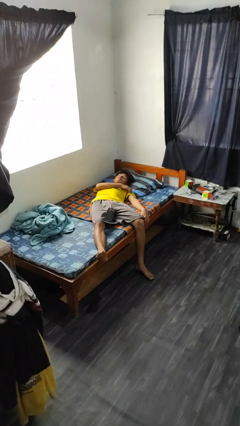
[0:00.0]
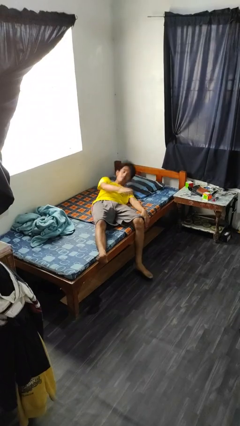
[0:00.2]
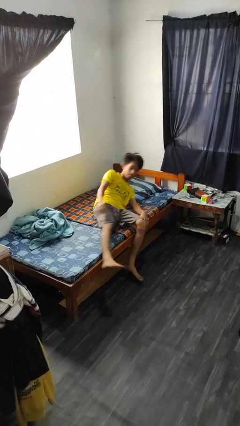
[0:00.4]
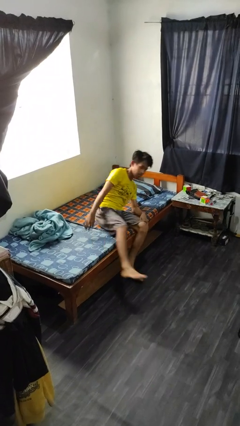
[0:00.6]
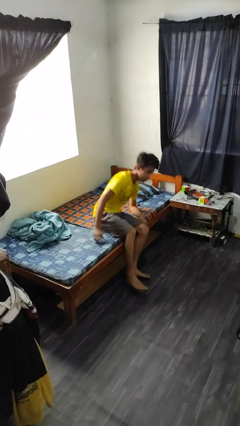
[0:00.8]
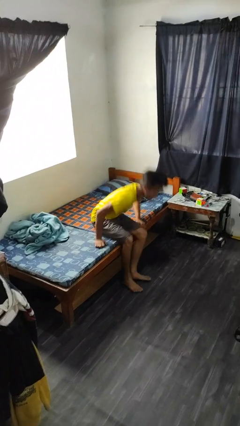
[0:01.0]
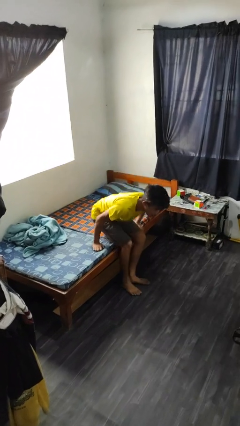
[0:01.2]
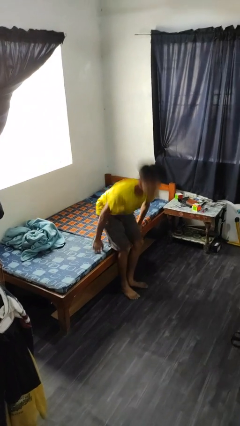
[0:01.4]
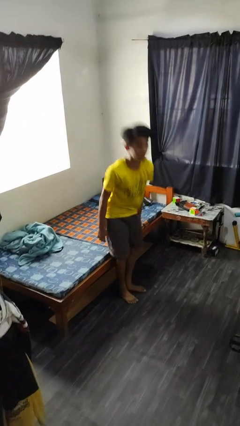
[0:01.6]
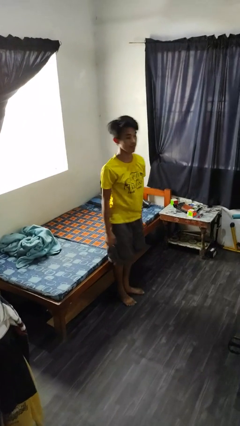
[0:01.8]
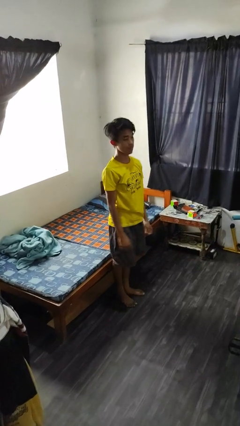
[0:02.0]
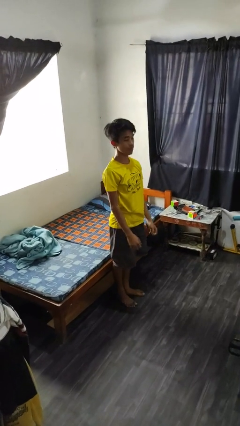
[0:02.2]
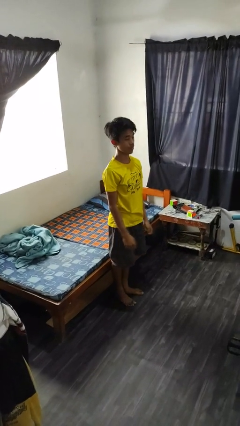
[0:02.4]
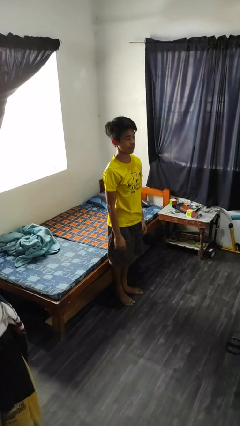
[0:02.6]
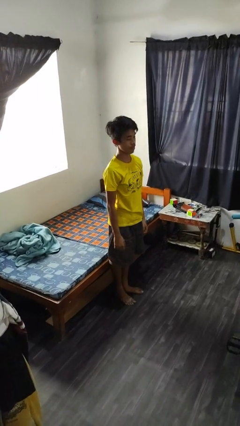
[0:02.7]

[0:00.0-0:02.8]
person stands up

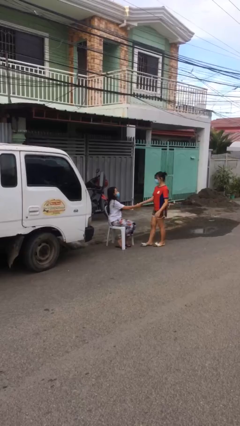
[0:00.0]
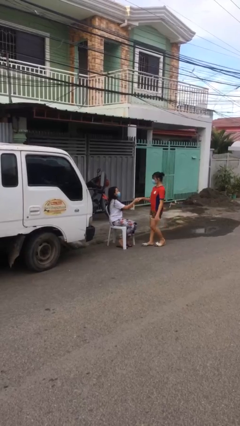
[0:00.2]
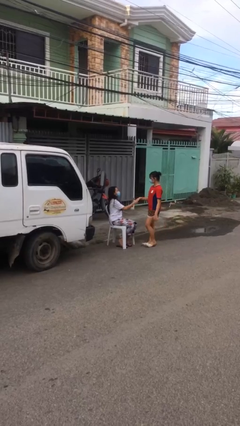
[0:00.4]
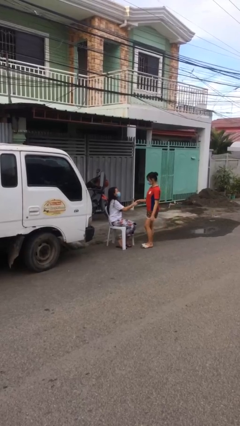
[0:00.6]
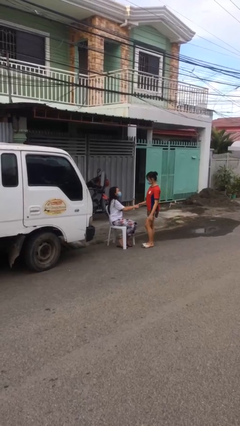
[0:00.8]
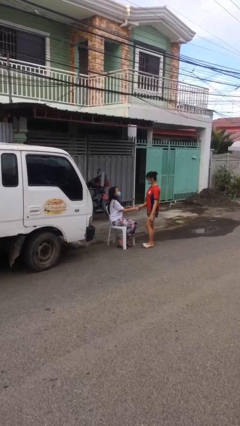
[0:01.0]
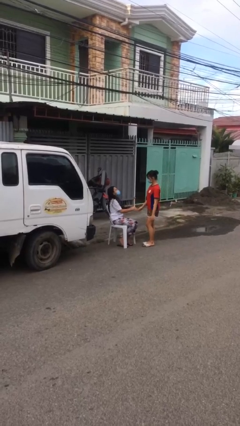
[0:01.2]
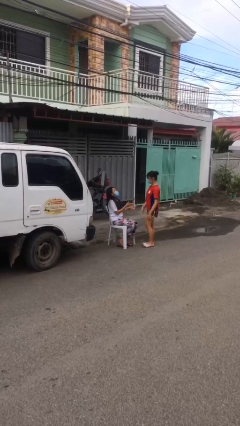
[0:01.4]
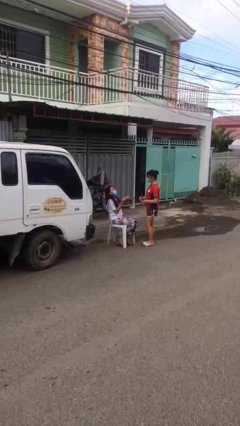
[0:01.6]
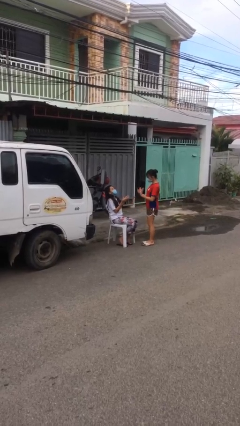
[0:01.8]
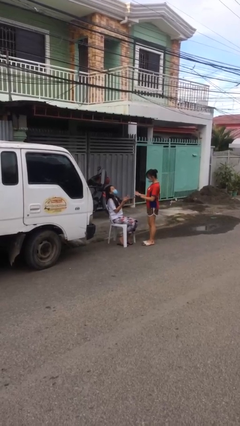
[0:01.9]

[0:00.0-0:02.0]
person shakes hand

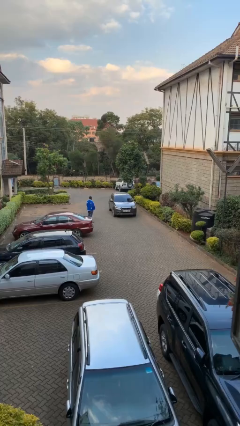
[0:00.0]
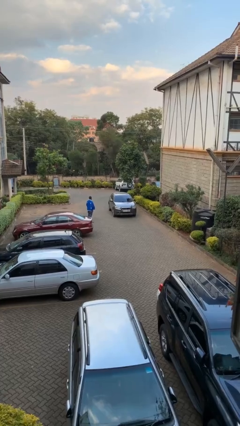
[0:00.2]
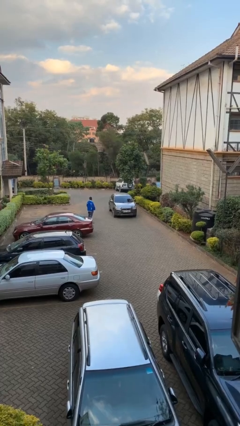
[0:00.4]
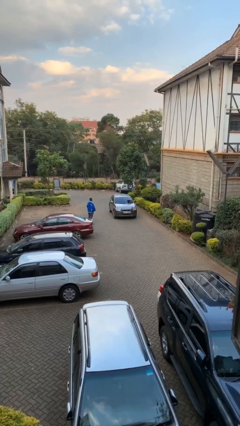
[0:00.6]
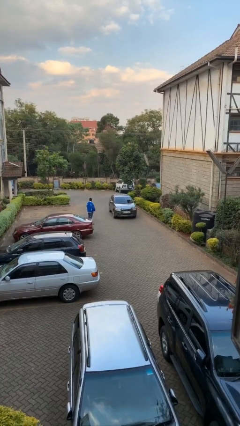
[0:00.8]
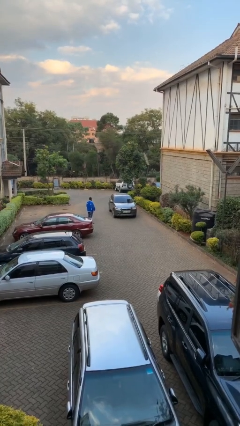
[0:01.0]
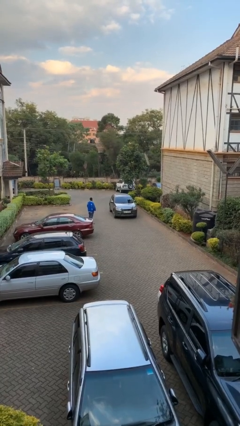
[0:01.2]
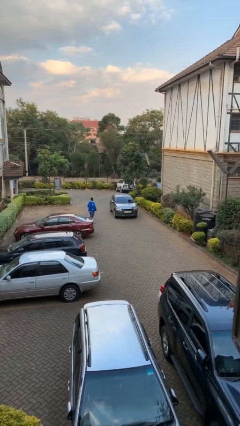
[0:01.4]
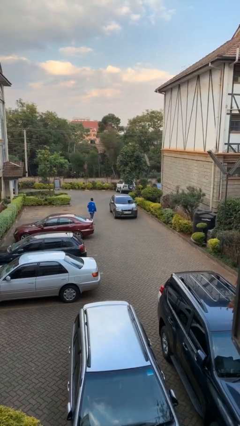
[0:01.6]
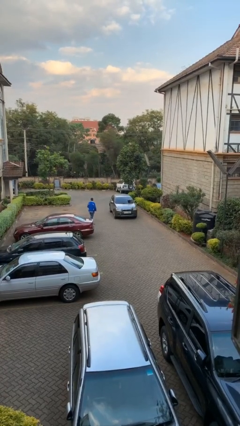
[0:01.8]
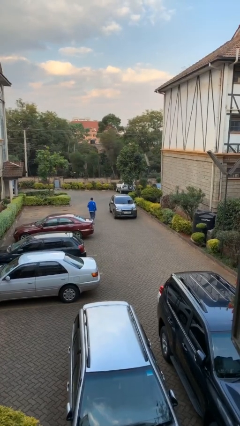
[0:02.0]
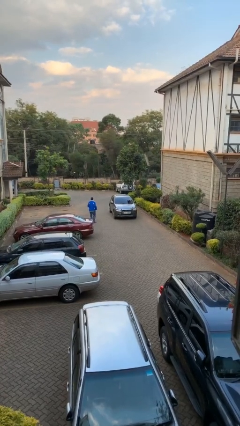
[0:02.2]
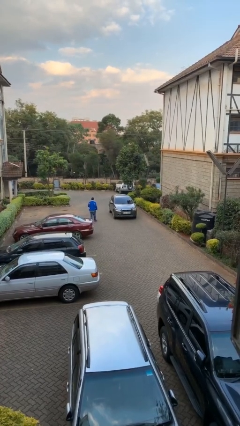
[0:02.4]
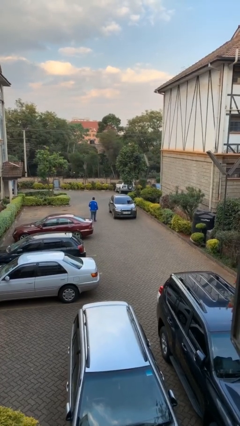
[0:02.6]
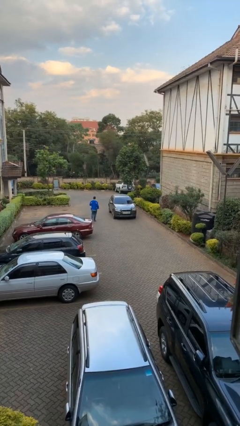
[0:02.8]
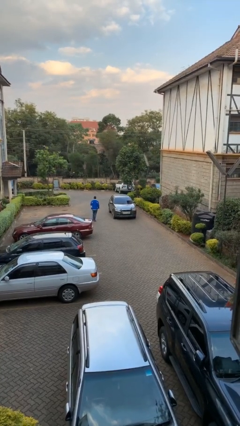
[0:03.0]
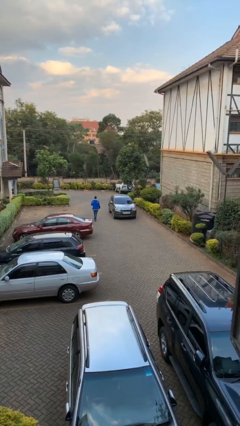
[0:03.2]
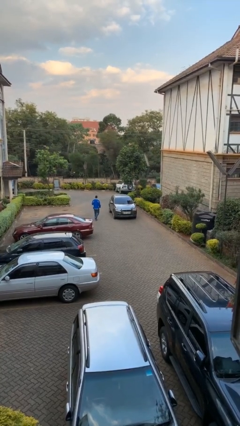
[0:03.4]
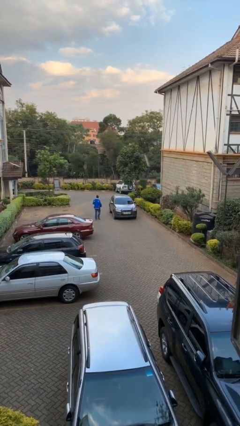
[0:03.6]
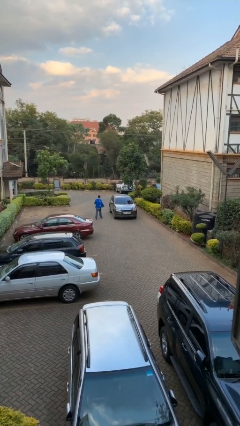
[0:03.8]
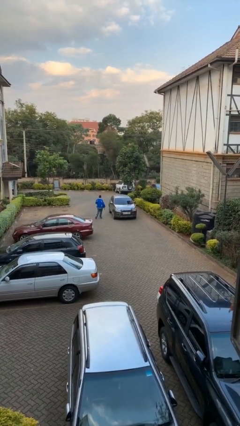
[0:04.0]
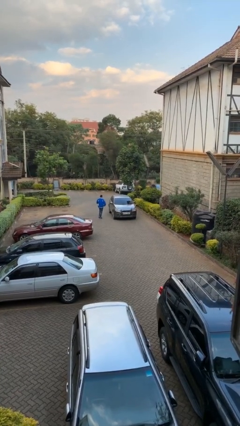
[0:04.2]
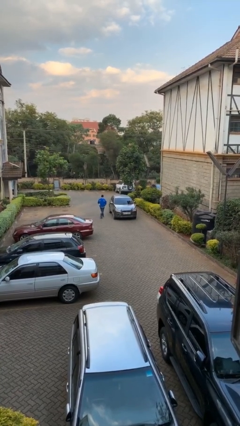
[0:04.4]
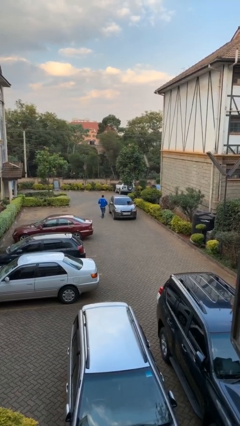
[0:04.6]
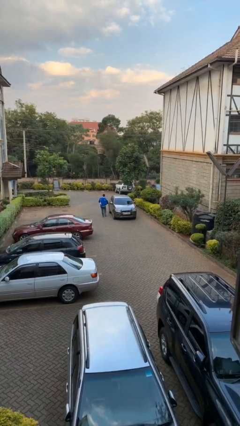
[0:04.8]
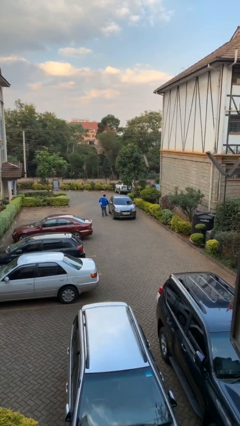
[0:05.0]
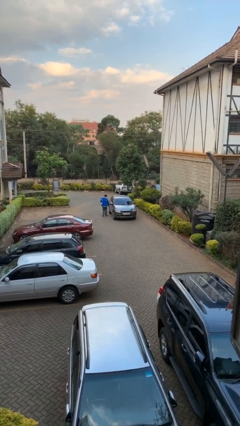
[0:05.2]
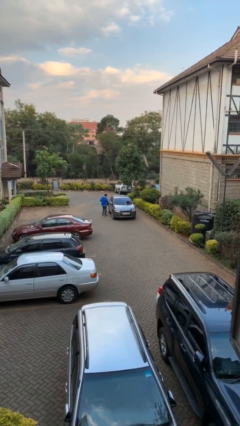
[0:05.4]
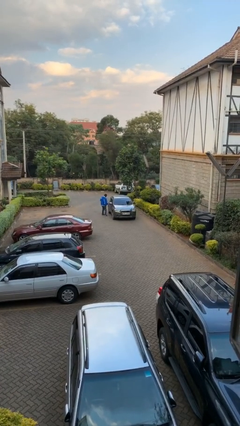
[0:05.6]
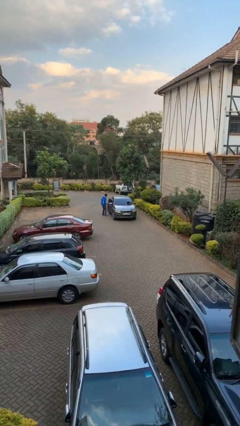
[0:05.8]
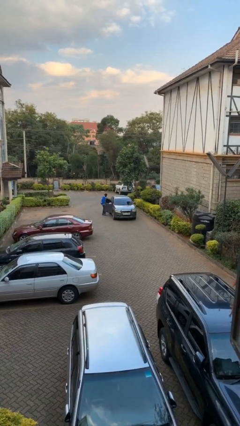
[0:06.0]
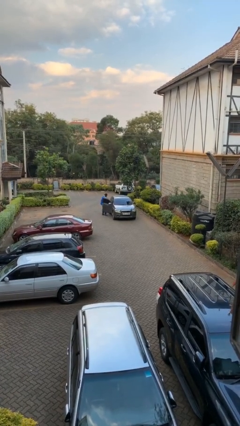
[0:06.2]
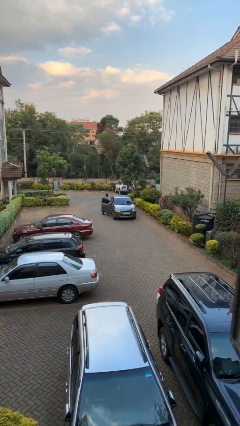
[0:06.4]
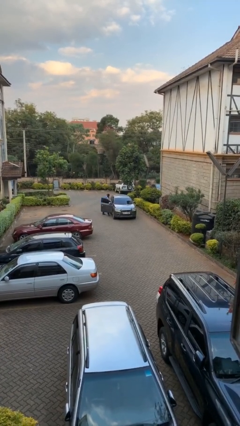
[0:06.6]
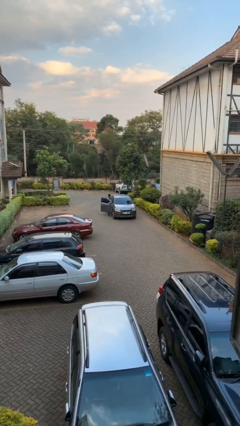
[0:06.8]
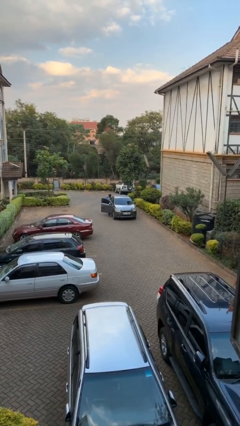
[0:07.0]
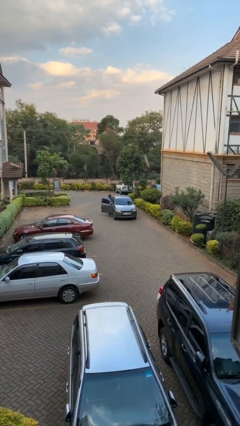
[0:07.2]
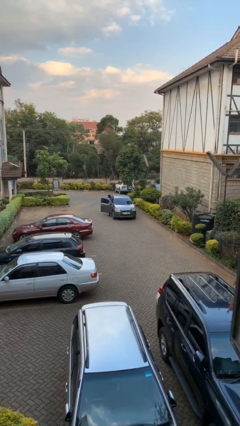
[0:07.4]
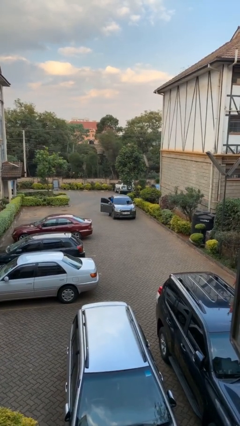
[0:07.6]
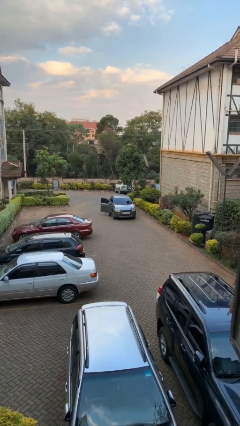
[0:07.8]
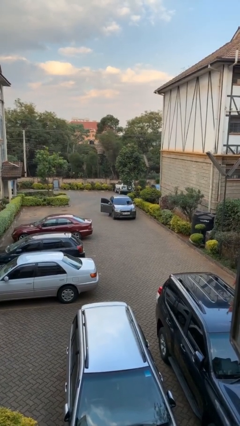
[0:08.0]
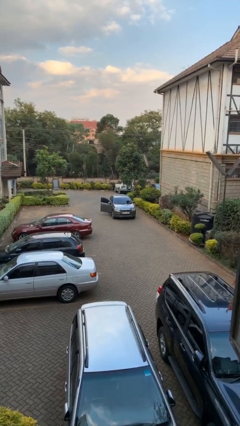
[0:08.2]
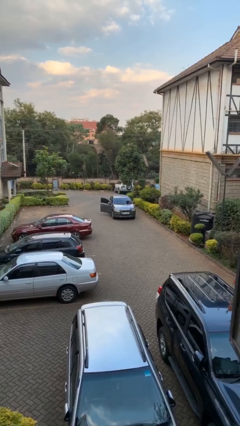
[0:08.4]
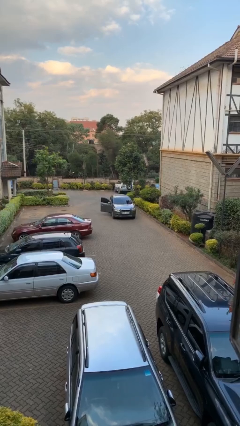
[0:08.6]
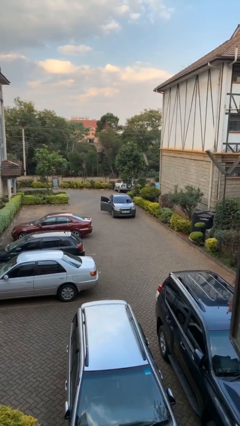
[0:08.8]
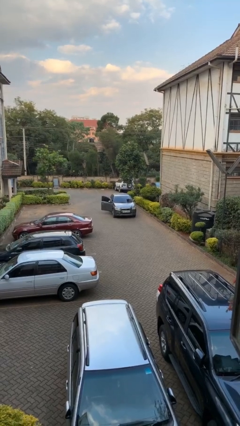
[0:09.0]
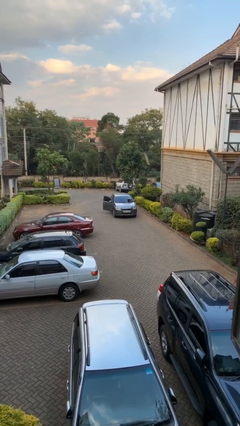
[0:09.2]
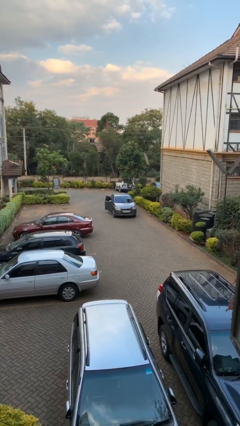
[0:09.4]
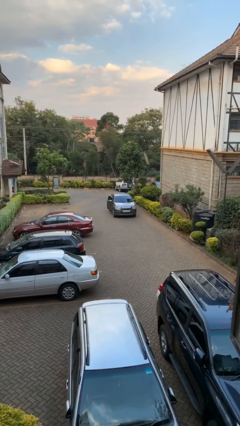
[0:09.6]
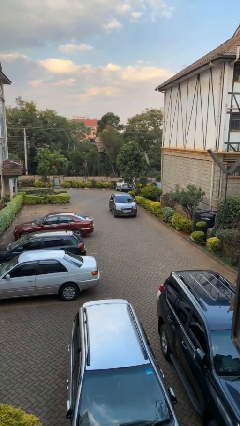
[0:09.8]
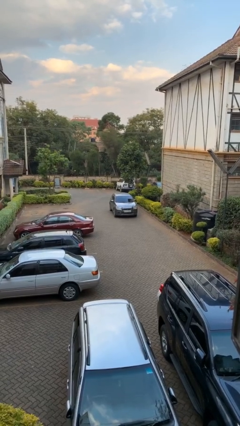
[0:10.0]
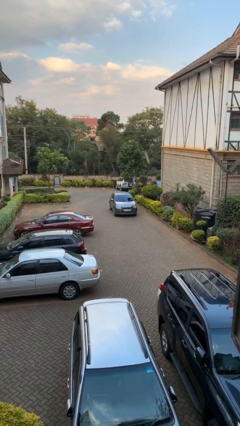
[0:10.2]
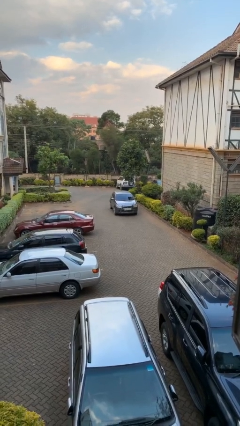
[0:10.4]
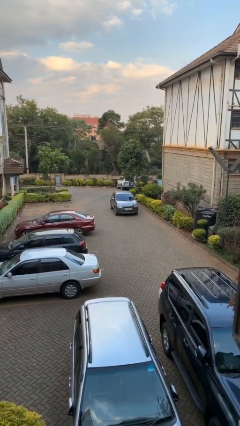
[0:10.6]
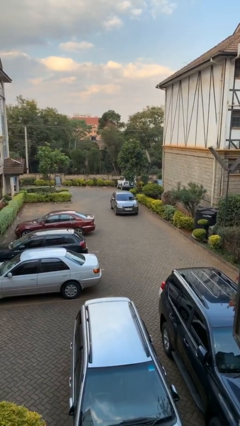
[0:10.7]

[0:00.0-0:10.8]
car picks up person

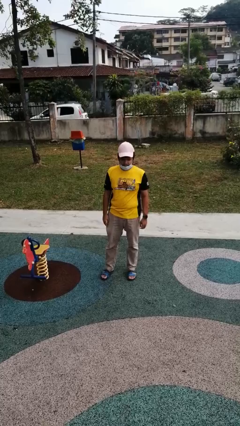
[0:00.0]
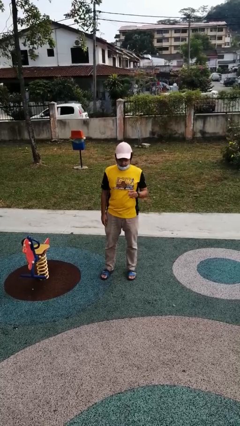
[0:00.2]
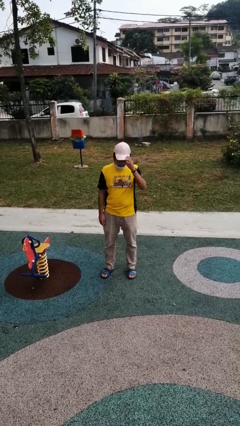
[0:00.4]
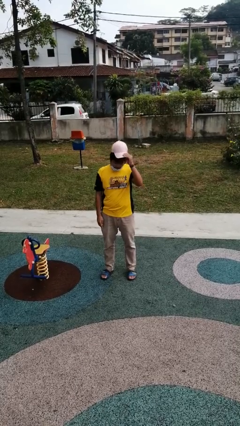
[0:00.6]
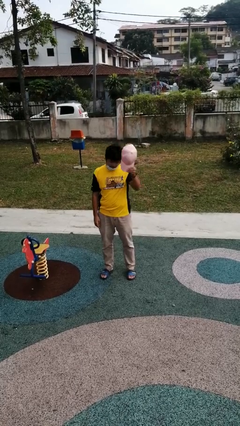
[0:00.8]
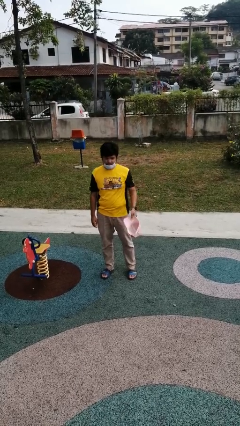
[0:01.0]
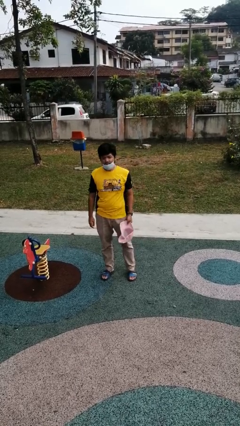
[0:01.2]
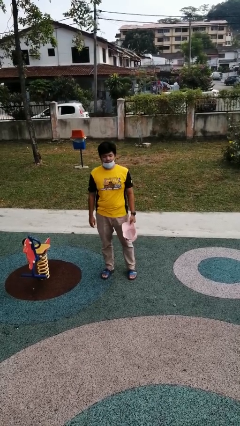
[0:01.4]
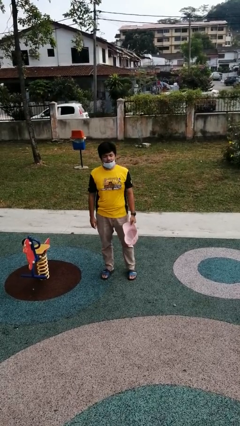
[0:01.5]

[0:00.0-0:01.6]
person takes off hat
